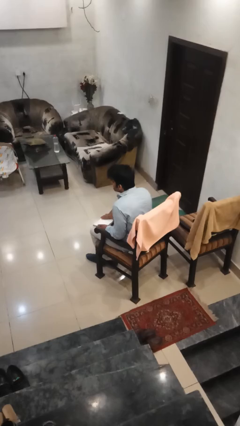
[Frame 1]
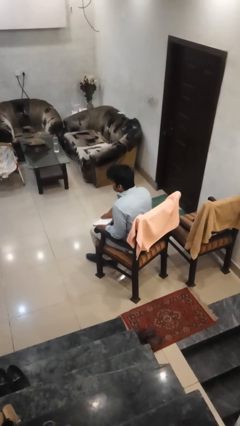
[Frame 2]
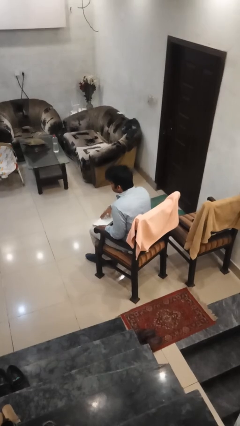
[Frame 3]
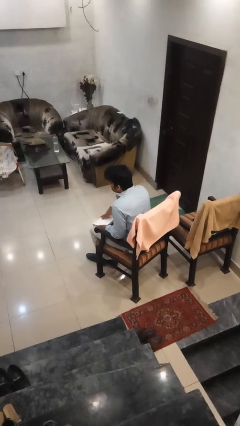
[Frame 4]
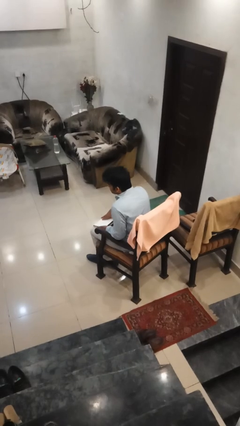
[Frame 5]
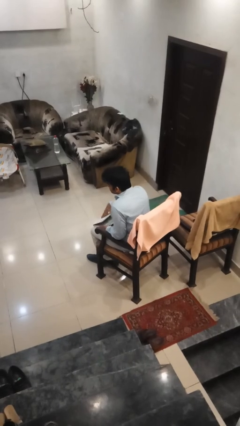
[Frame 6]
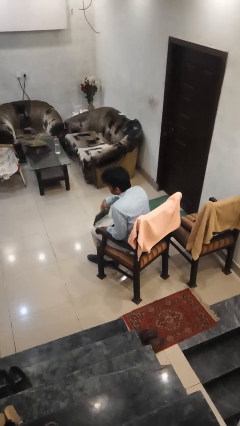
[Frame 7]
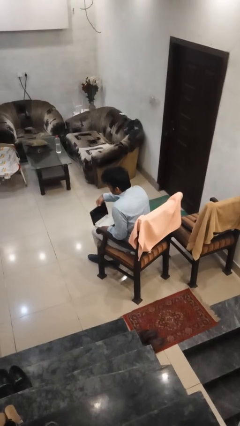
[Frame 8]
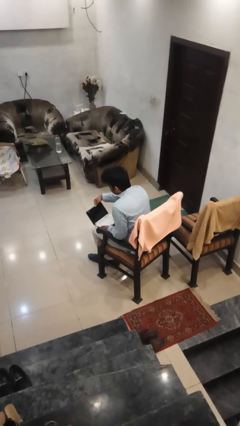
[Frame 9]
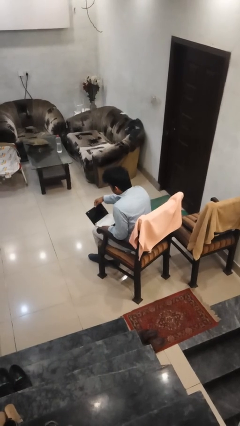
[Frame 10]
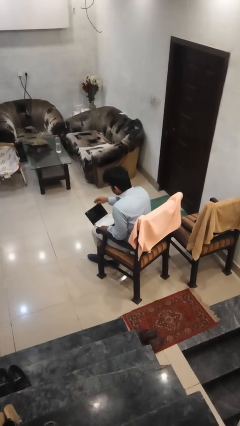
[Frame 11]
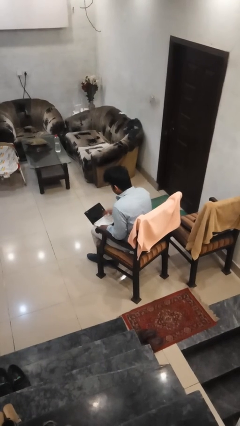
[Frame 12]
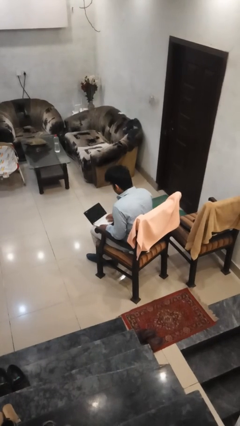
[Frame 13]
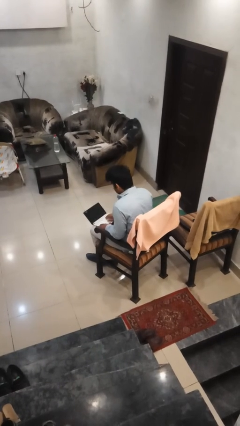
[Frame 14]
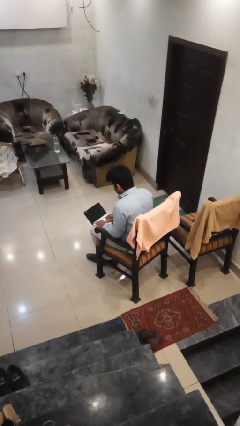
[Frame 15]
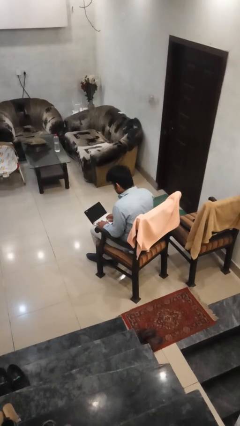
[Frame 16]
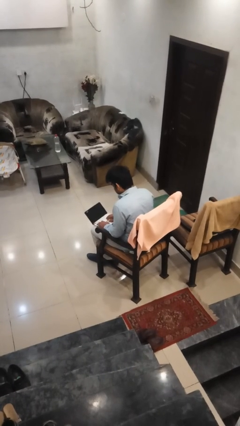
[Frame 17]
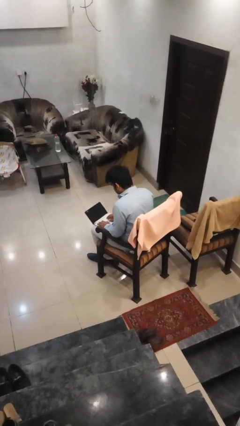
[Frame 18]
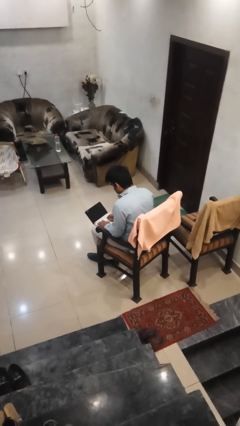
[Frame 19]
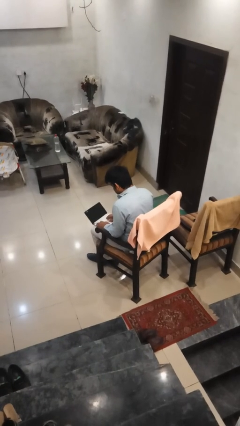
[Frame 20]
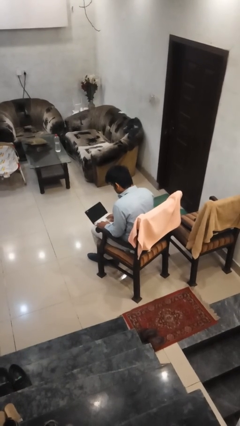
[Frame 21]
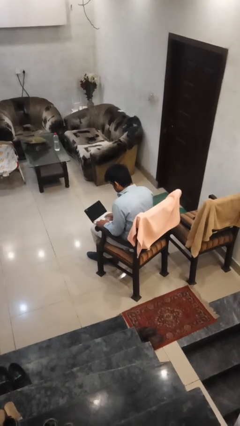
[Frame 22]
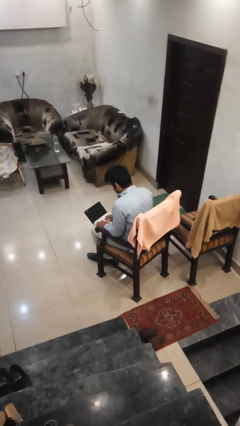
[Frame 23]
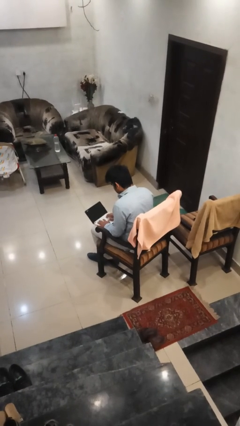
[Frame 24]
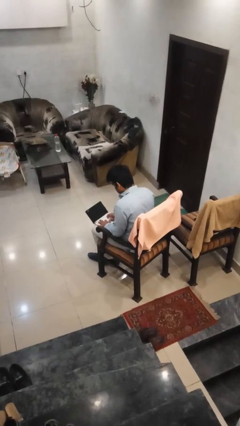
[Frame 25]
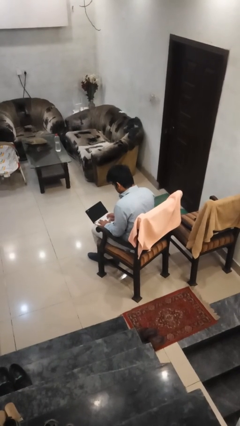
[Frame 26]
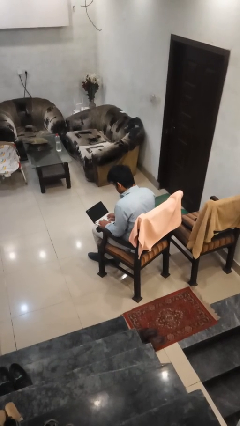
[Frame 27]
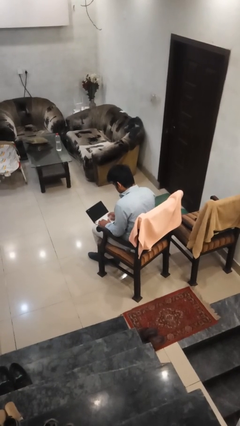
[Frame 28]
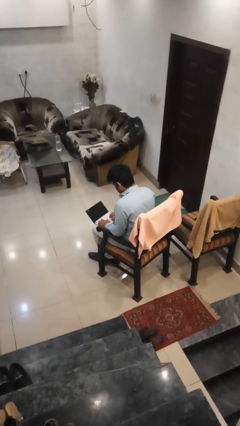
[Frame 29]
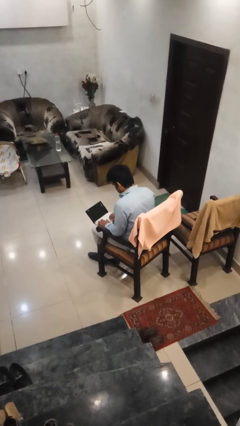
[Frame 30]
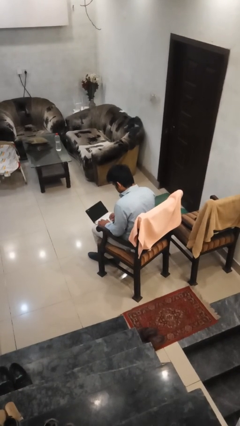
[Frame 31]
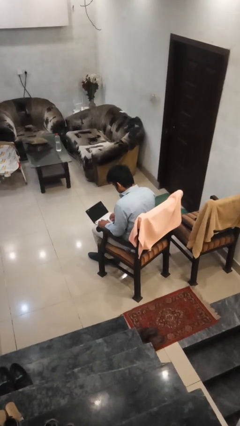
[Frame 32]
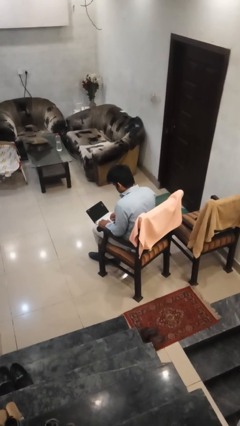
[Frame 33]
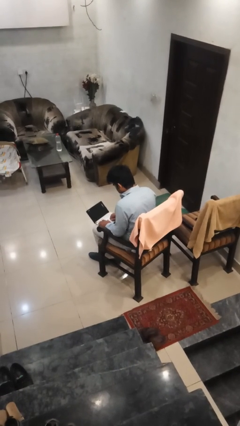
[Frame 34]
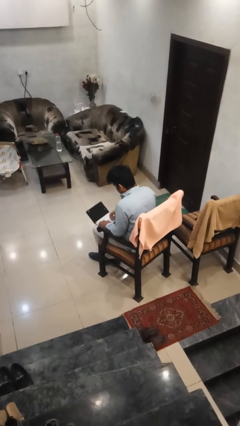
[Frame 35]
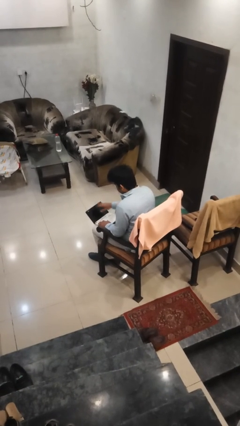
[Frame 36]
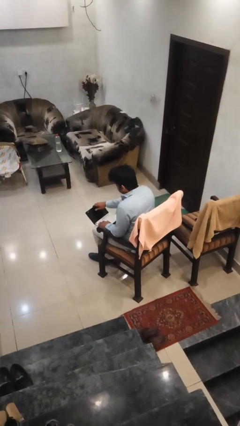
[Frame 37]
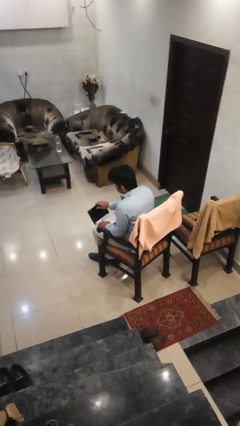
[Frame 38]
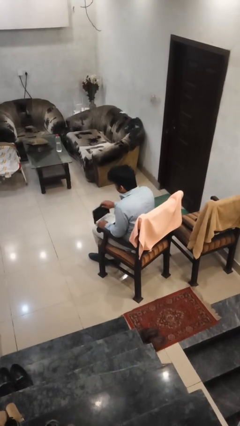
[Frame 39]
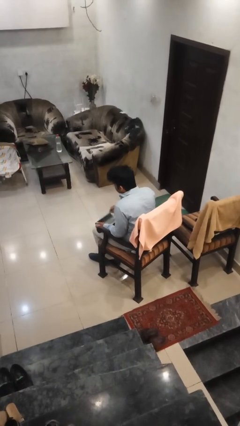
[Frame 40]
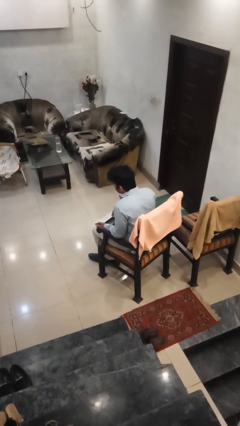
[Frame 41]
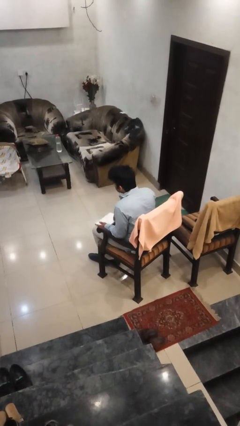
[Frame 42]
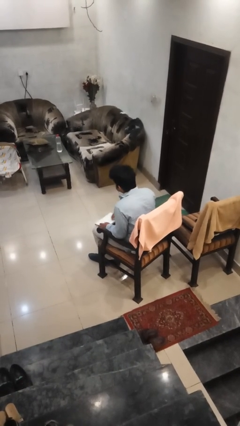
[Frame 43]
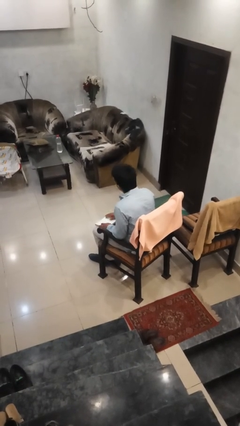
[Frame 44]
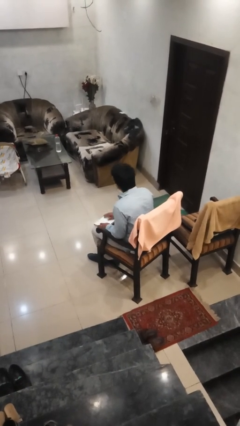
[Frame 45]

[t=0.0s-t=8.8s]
person interacts with laptop

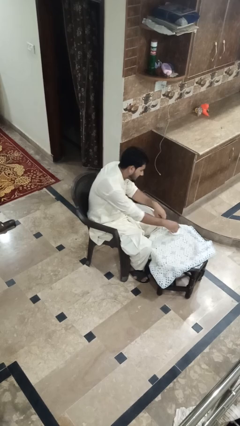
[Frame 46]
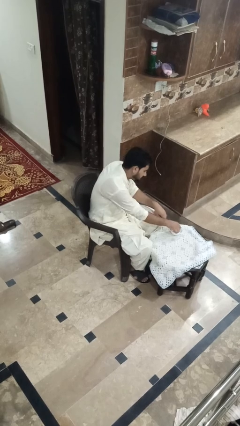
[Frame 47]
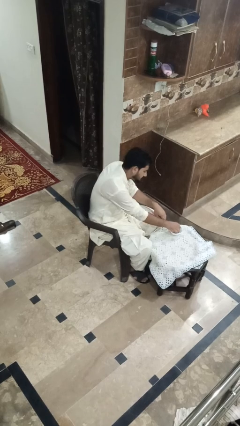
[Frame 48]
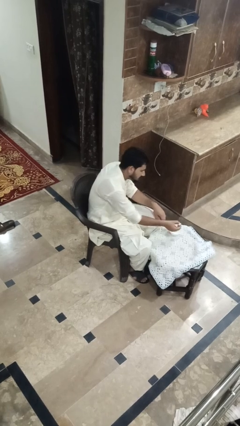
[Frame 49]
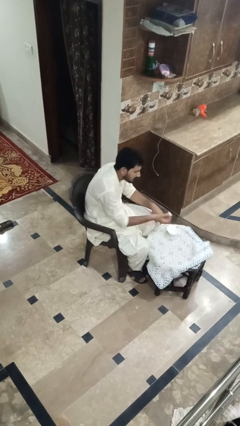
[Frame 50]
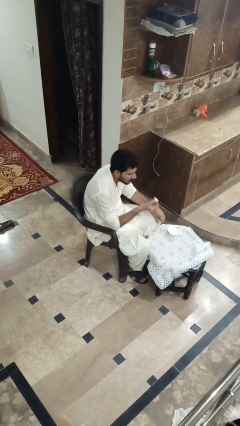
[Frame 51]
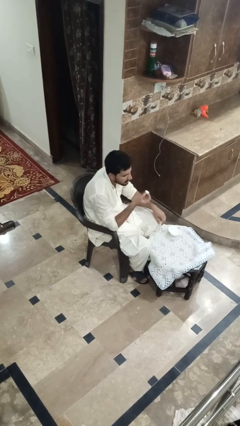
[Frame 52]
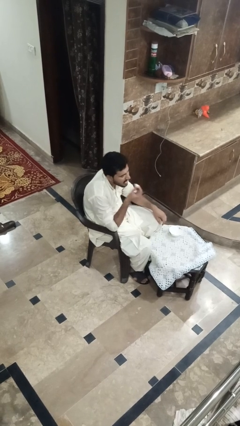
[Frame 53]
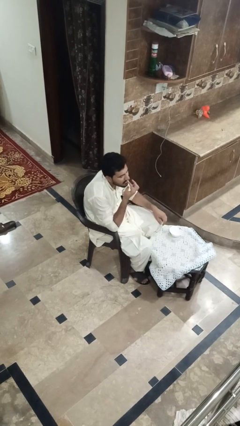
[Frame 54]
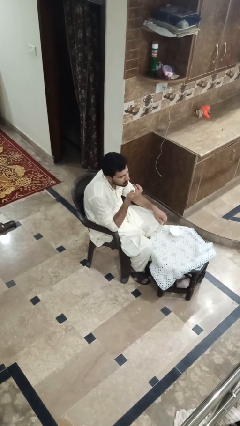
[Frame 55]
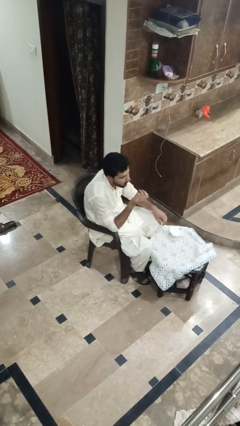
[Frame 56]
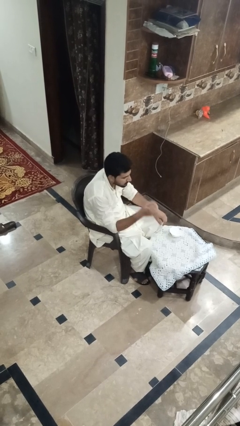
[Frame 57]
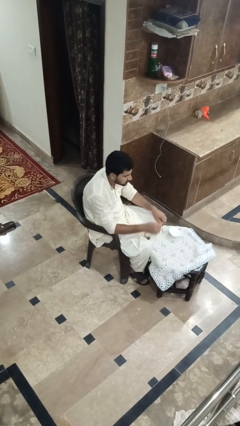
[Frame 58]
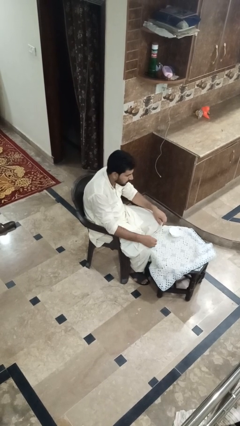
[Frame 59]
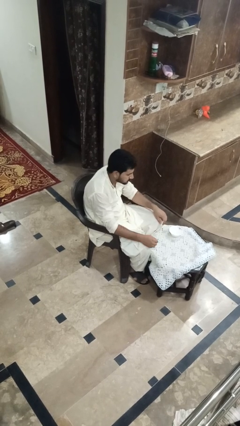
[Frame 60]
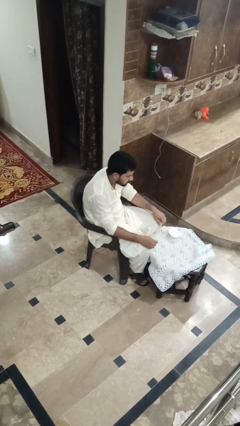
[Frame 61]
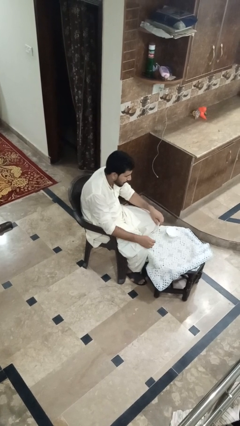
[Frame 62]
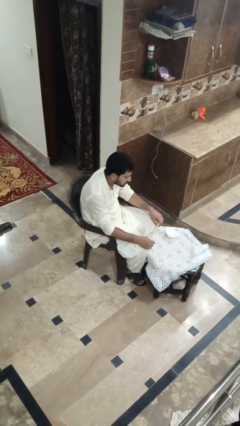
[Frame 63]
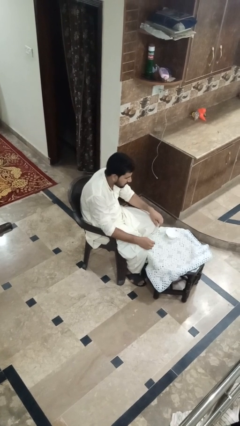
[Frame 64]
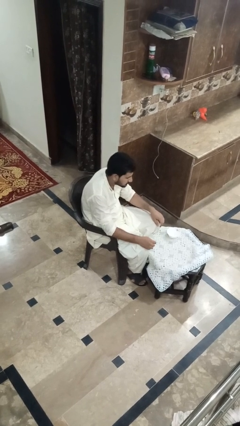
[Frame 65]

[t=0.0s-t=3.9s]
person eats with hands

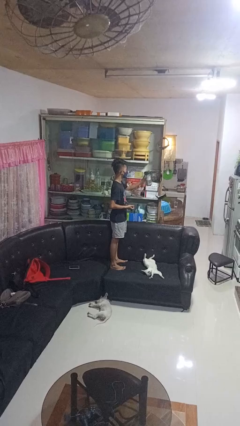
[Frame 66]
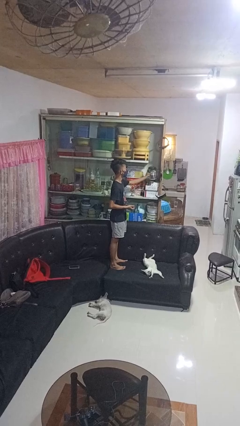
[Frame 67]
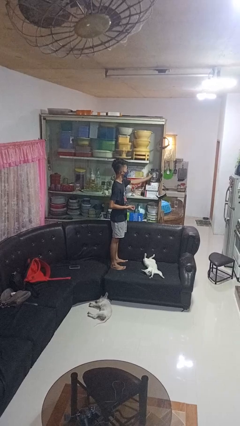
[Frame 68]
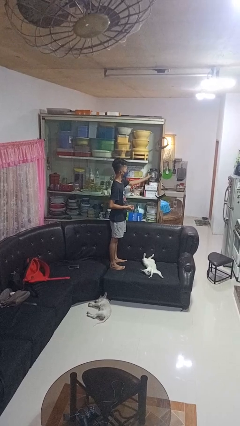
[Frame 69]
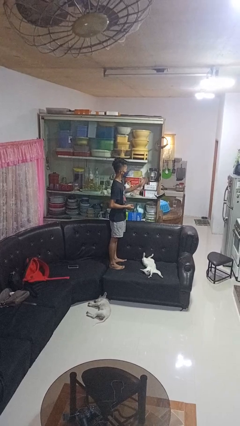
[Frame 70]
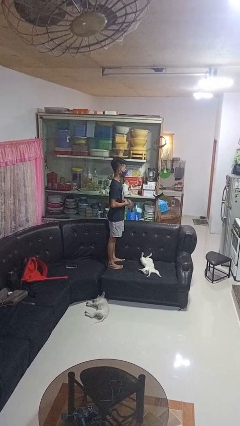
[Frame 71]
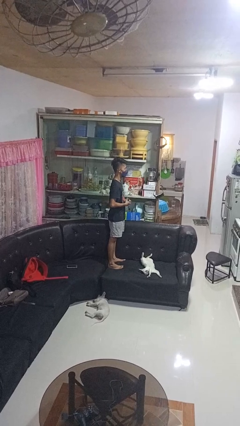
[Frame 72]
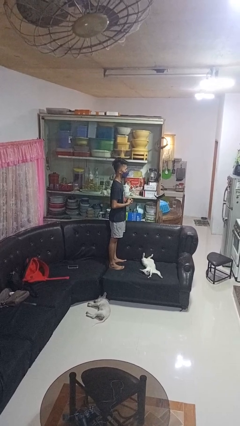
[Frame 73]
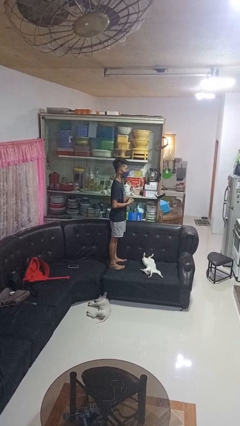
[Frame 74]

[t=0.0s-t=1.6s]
person puts down object into cabinet

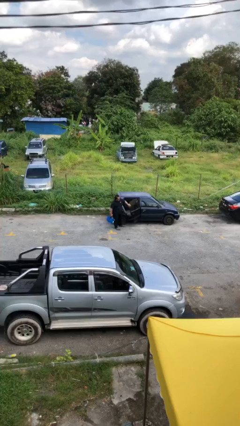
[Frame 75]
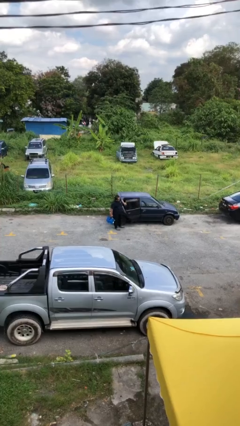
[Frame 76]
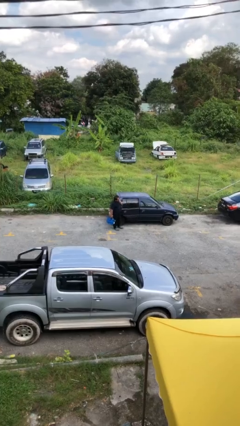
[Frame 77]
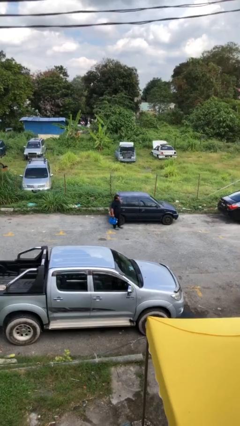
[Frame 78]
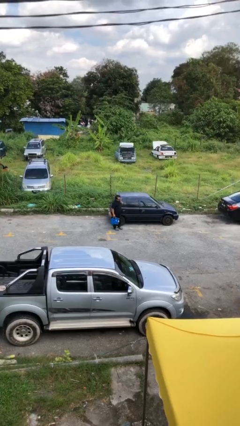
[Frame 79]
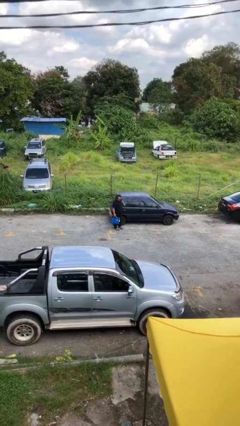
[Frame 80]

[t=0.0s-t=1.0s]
person closes car door

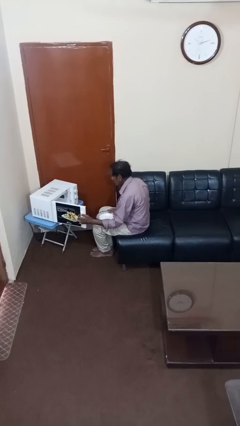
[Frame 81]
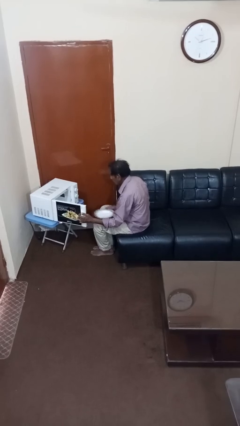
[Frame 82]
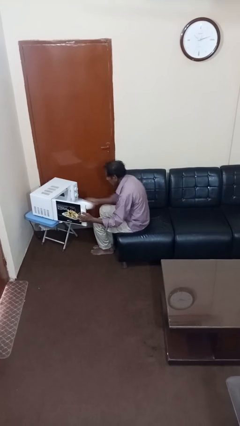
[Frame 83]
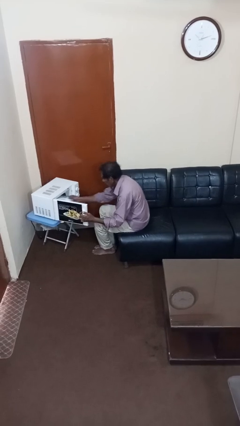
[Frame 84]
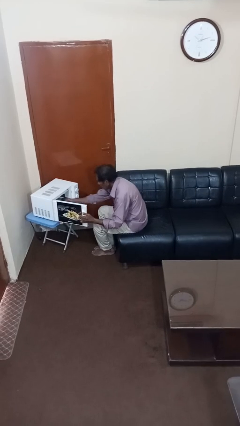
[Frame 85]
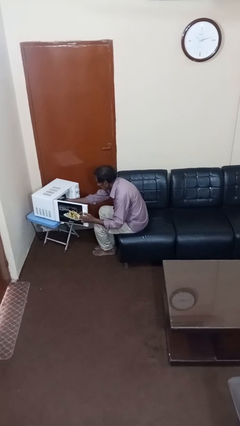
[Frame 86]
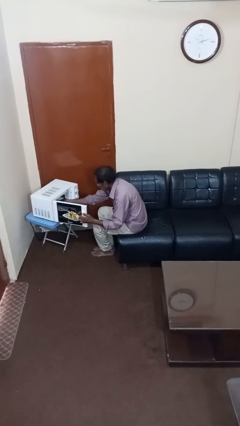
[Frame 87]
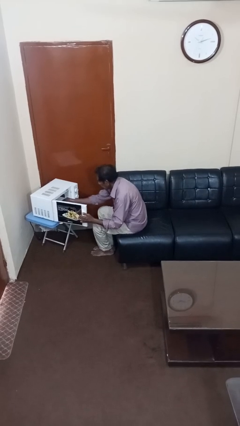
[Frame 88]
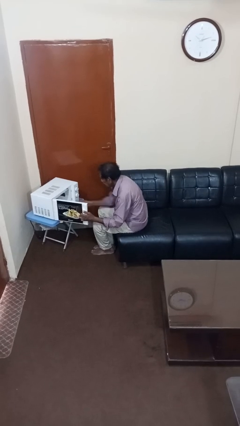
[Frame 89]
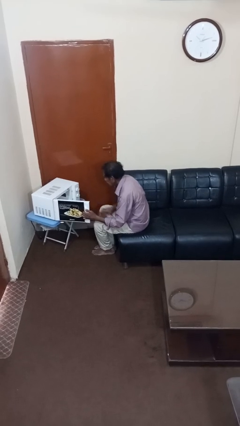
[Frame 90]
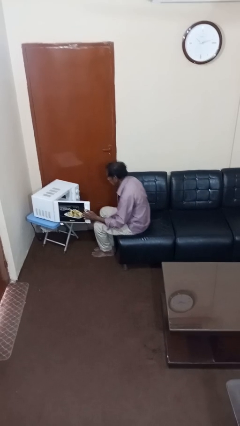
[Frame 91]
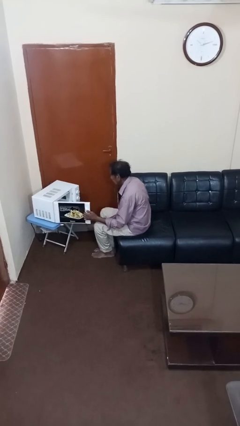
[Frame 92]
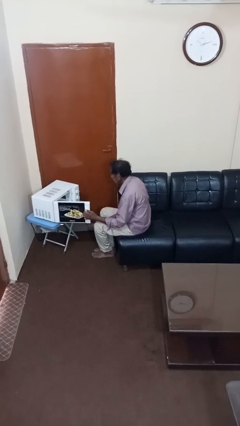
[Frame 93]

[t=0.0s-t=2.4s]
person puts object into microwave
